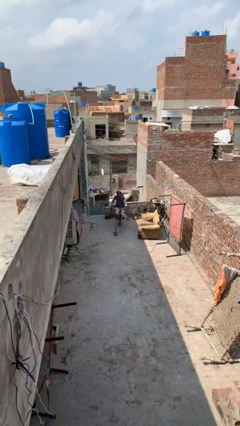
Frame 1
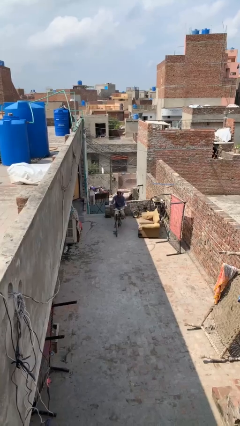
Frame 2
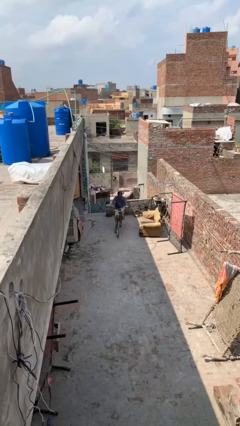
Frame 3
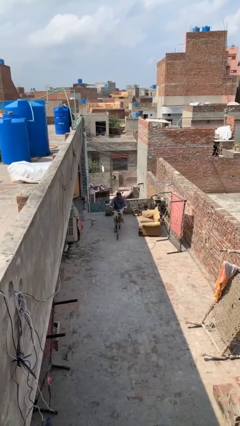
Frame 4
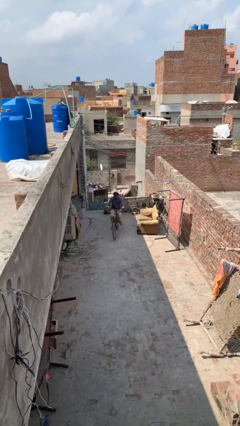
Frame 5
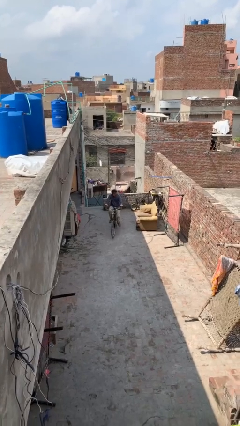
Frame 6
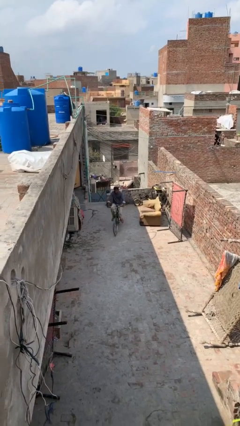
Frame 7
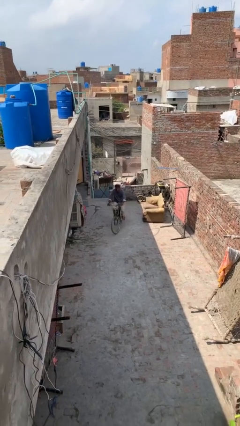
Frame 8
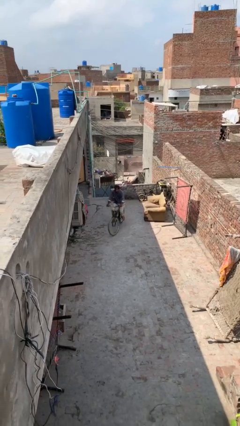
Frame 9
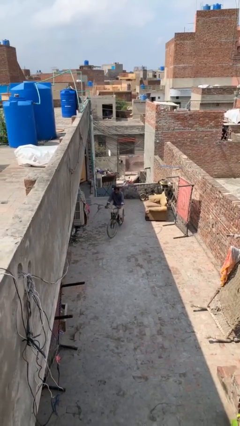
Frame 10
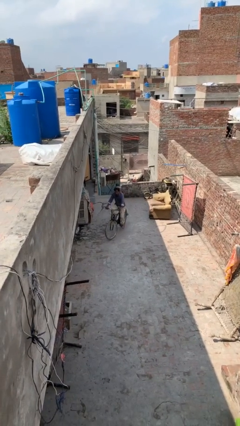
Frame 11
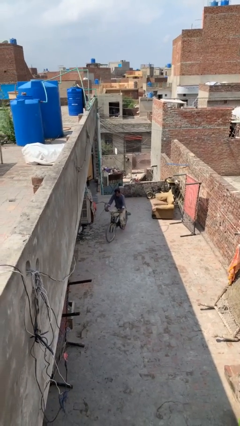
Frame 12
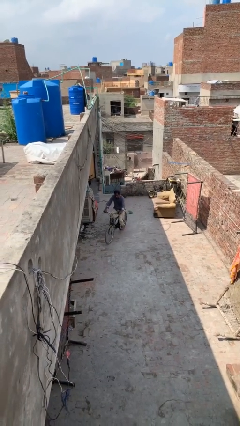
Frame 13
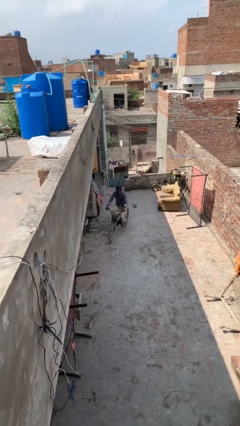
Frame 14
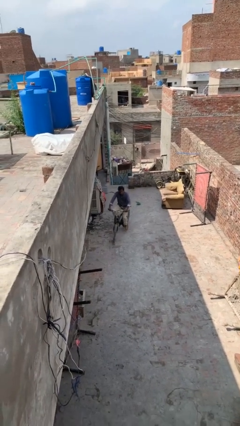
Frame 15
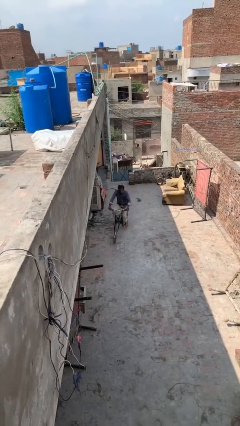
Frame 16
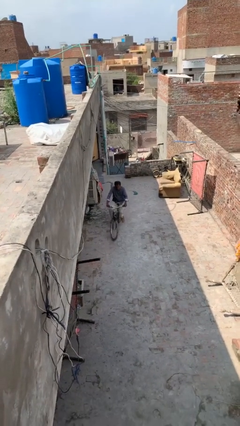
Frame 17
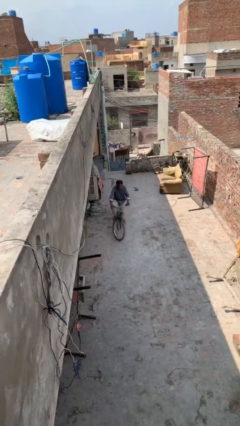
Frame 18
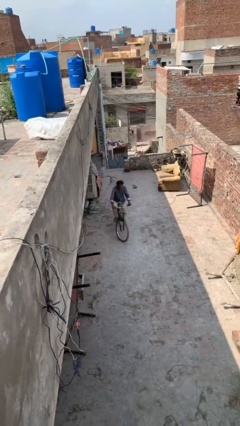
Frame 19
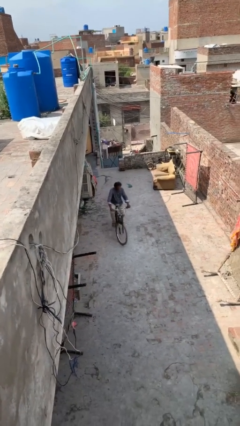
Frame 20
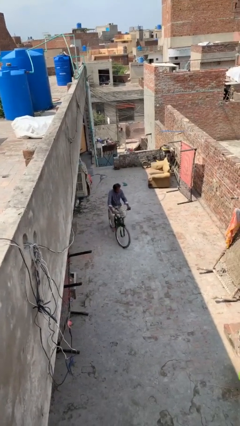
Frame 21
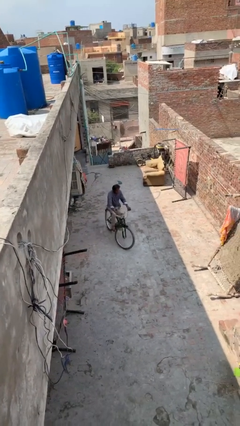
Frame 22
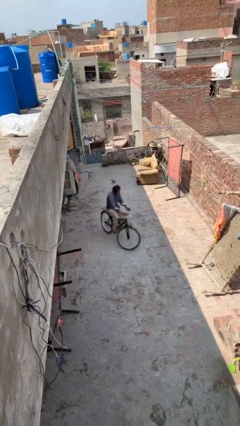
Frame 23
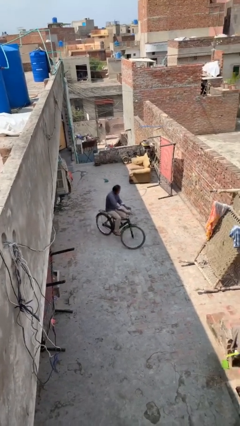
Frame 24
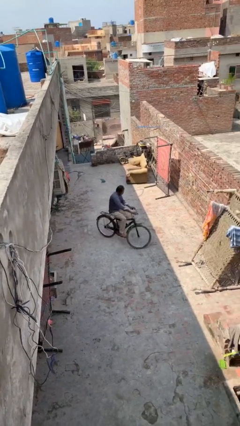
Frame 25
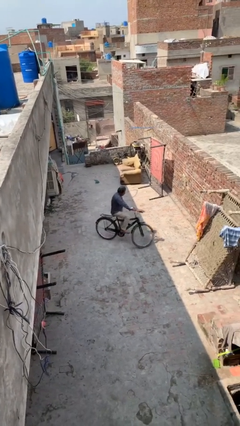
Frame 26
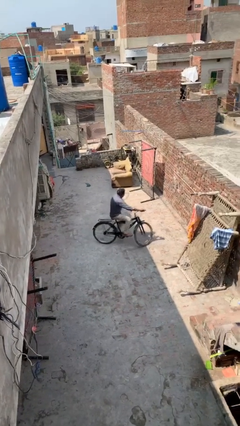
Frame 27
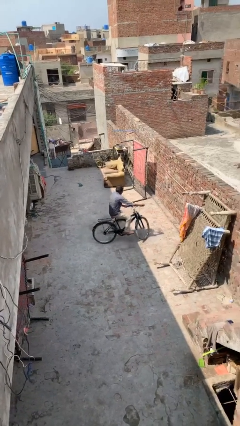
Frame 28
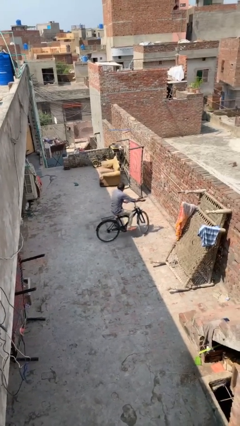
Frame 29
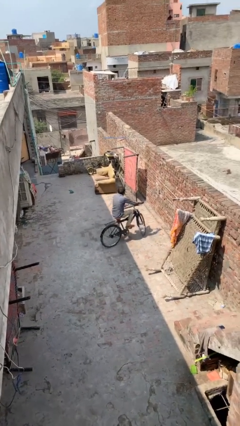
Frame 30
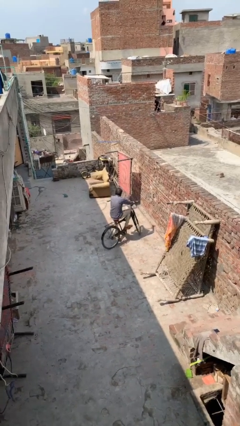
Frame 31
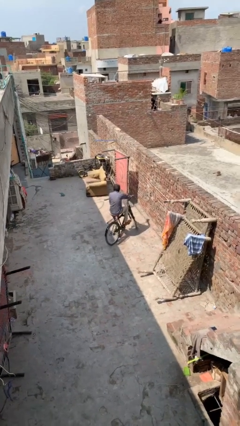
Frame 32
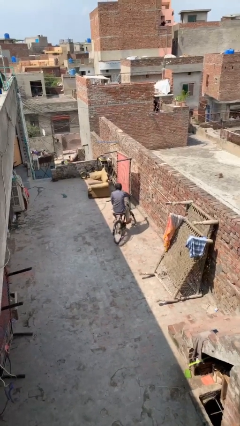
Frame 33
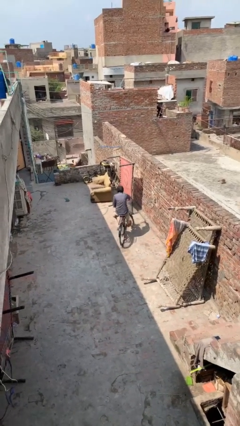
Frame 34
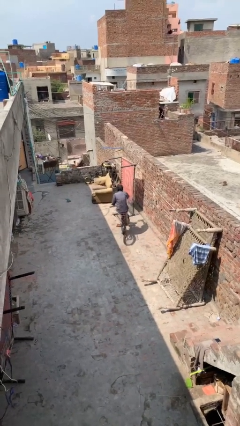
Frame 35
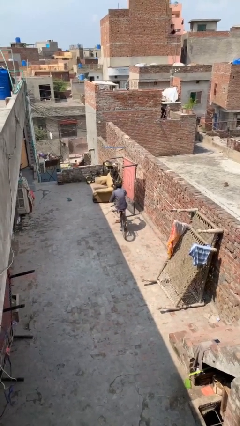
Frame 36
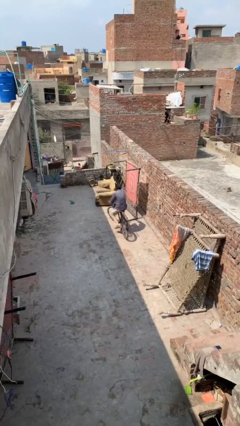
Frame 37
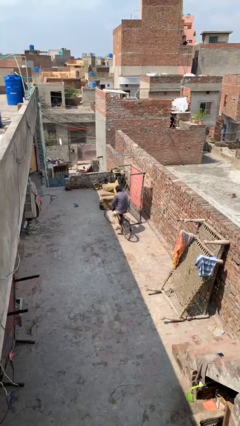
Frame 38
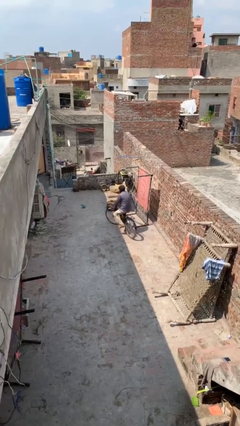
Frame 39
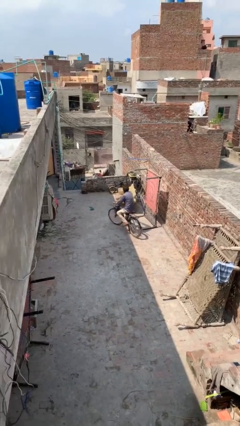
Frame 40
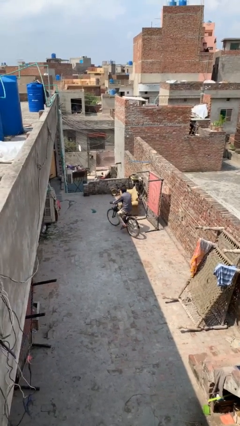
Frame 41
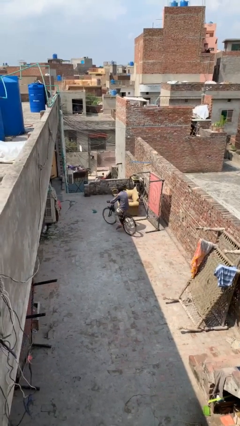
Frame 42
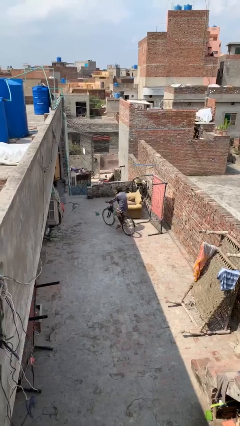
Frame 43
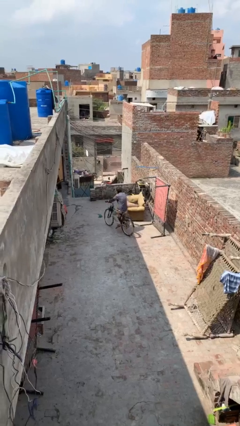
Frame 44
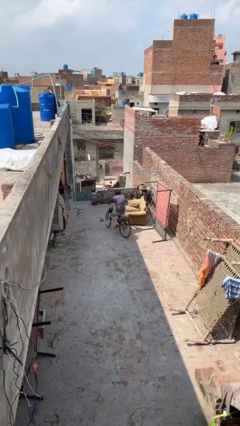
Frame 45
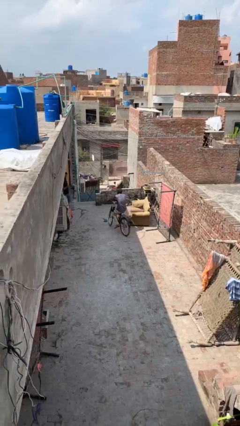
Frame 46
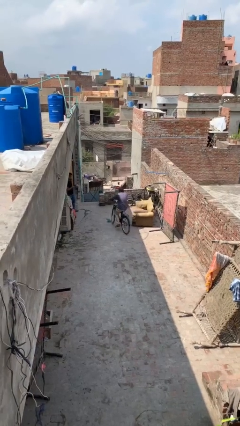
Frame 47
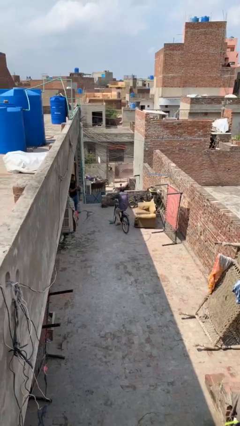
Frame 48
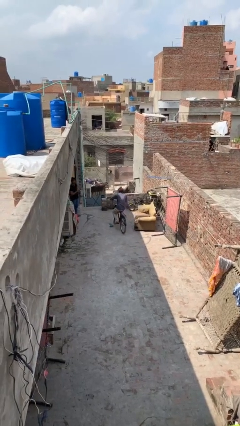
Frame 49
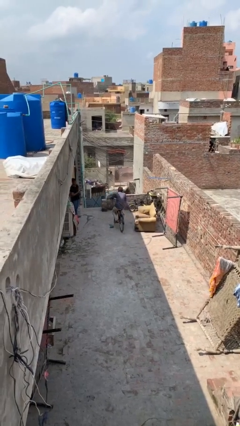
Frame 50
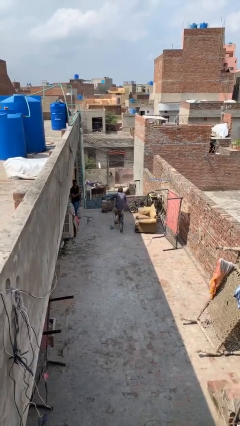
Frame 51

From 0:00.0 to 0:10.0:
person rides bicycle

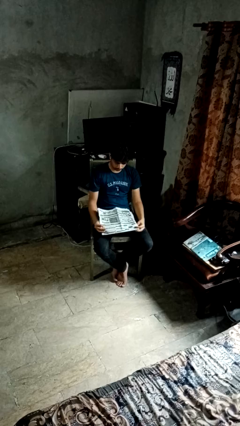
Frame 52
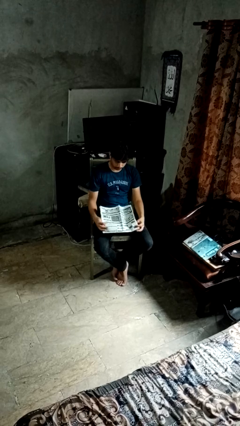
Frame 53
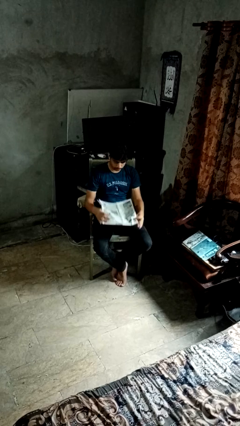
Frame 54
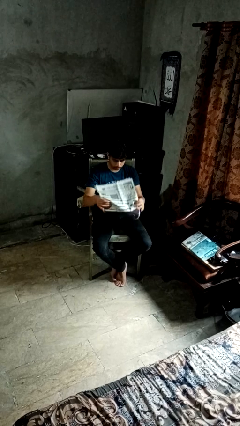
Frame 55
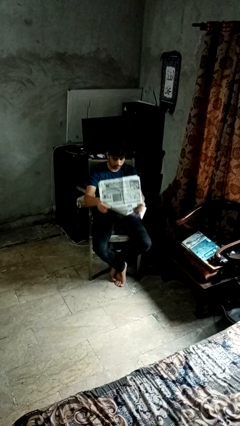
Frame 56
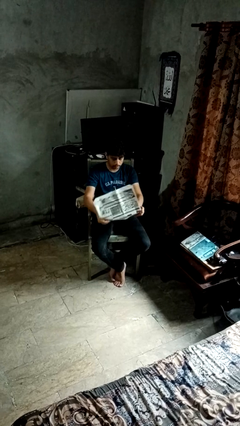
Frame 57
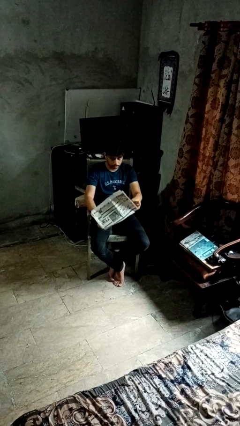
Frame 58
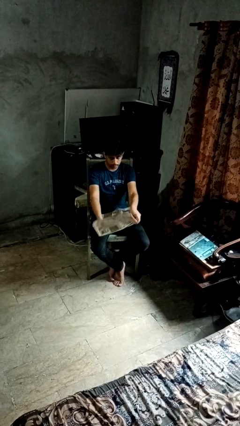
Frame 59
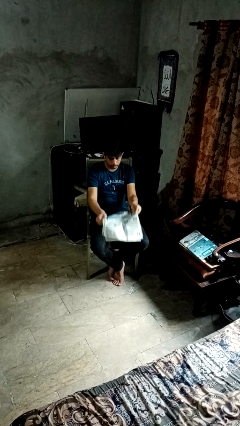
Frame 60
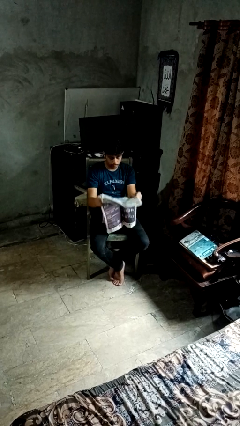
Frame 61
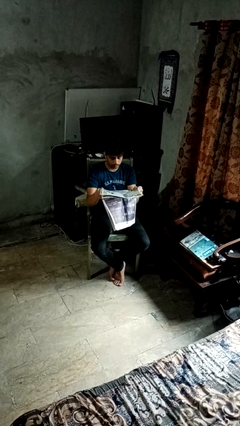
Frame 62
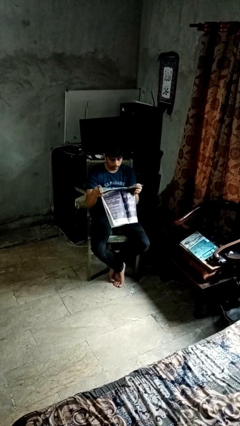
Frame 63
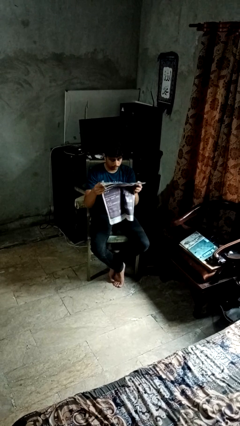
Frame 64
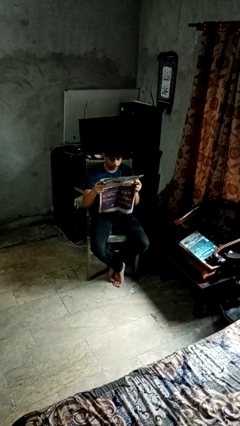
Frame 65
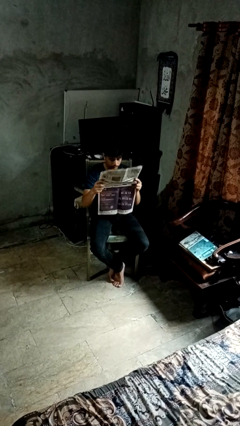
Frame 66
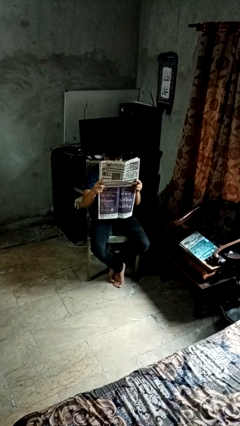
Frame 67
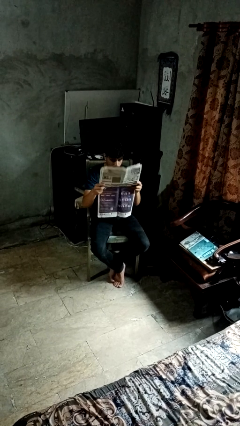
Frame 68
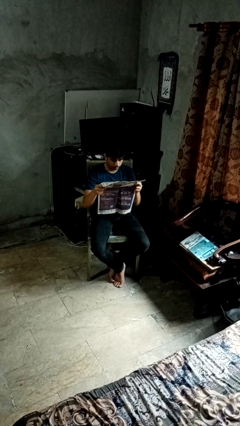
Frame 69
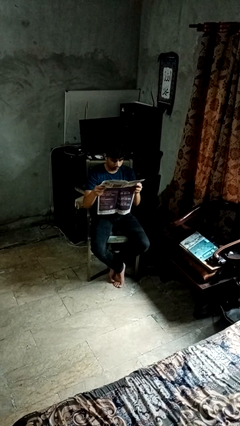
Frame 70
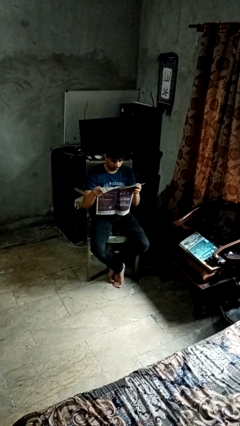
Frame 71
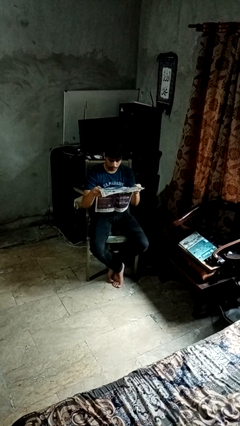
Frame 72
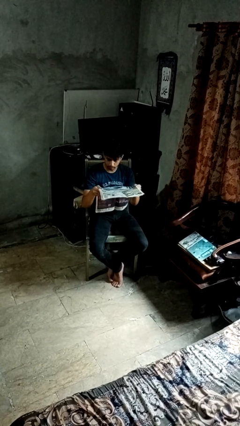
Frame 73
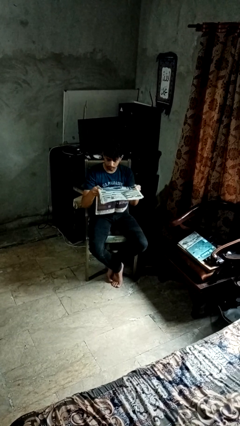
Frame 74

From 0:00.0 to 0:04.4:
person reads newspaper

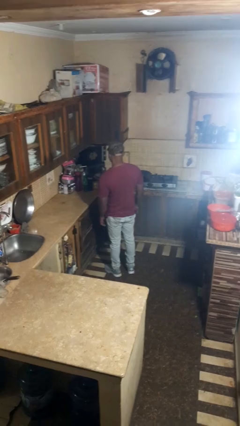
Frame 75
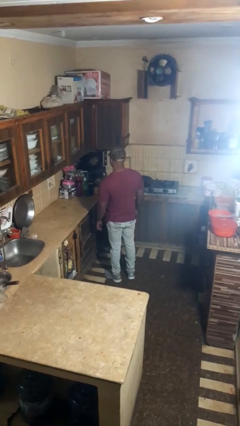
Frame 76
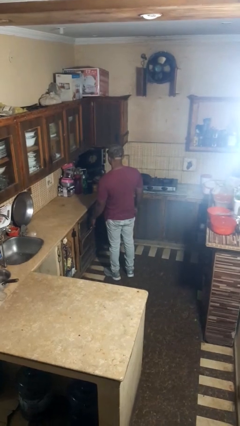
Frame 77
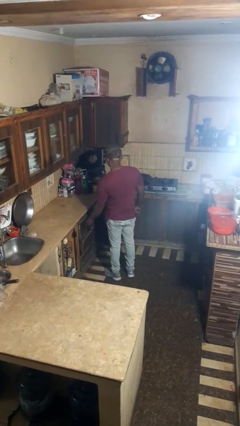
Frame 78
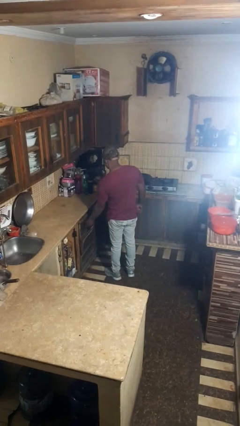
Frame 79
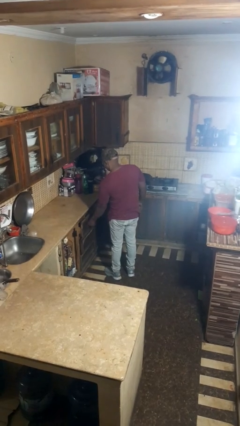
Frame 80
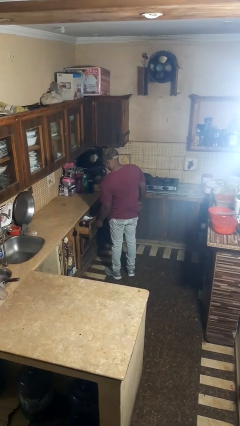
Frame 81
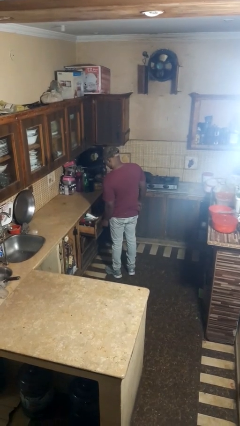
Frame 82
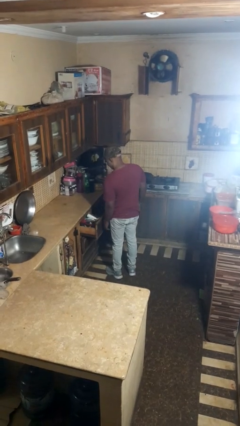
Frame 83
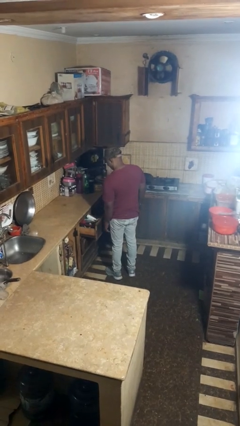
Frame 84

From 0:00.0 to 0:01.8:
person opens kitchen drawer

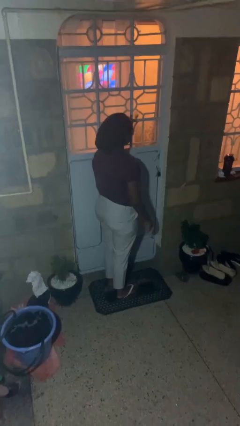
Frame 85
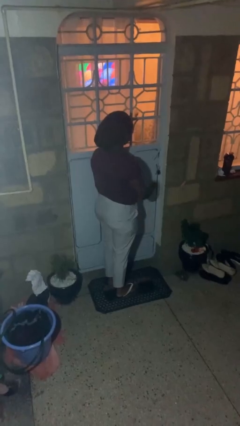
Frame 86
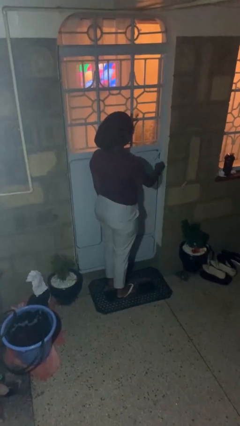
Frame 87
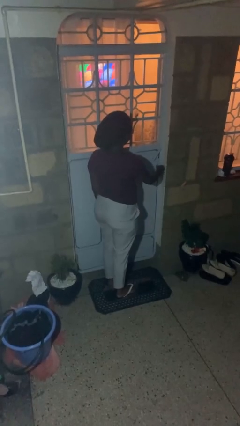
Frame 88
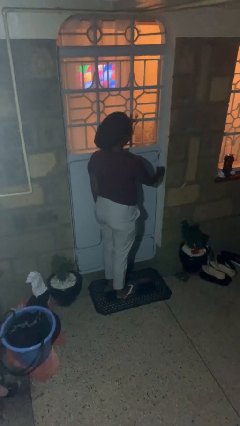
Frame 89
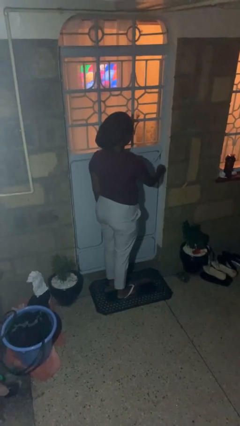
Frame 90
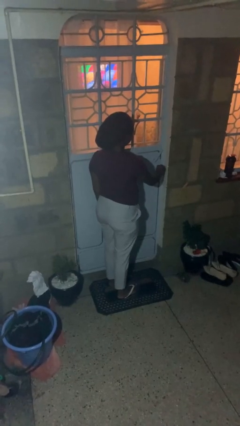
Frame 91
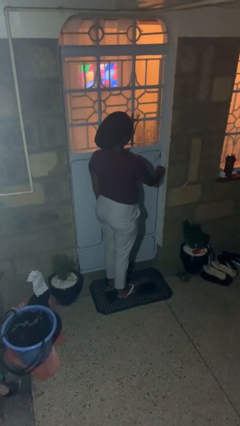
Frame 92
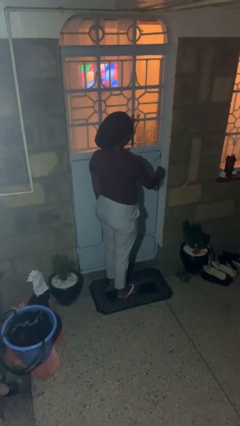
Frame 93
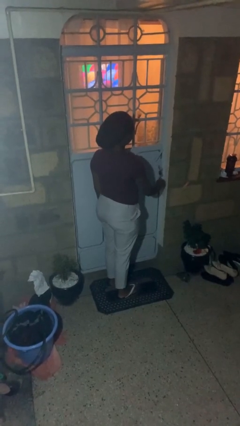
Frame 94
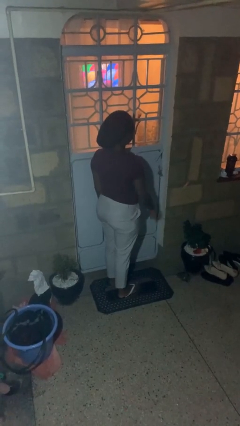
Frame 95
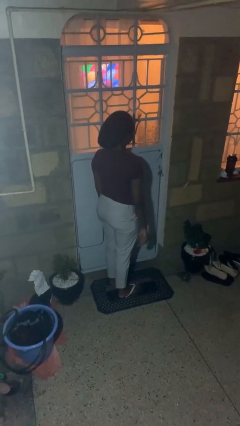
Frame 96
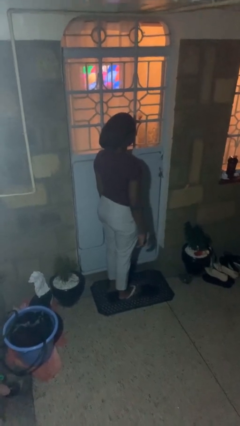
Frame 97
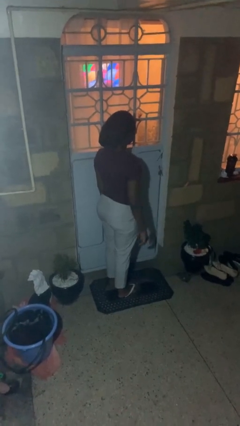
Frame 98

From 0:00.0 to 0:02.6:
person unlocks door with keys
